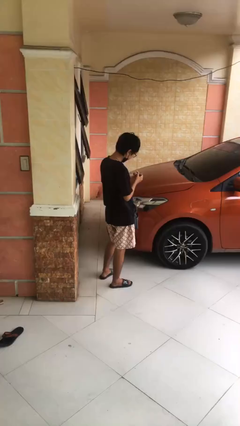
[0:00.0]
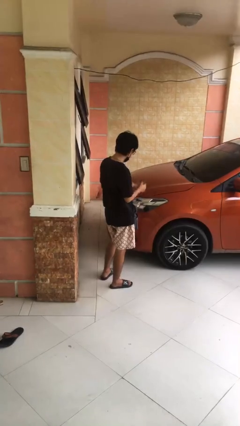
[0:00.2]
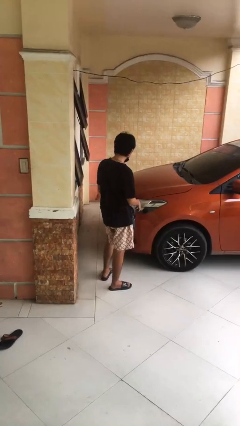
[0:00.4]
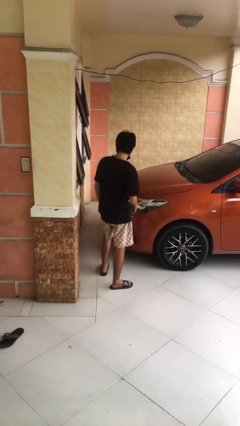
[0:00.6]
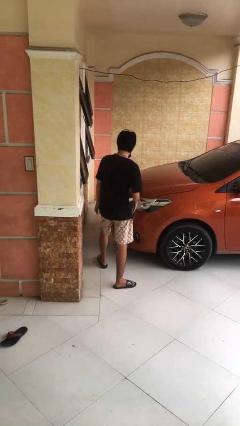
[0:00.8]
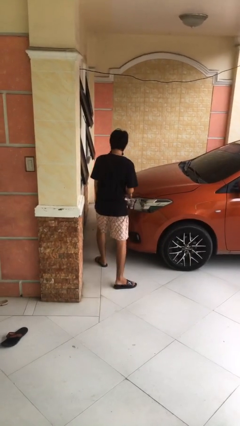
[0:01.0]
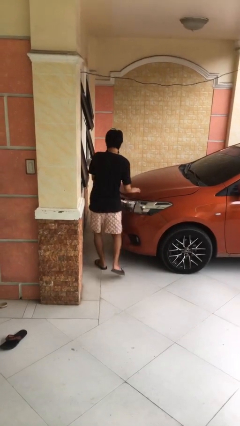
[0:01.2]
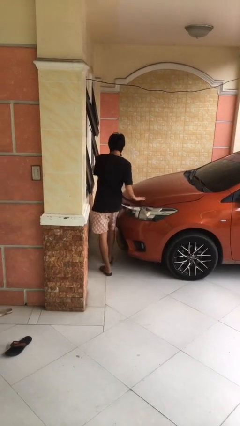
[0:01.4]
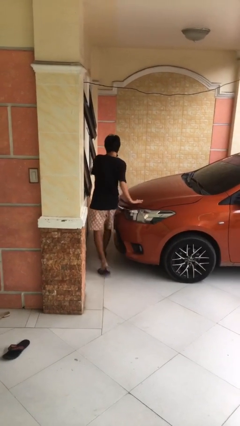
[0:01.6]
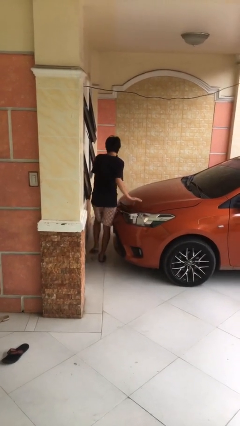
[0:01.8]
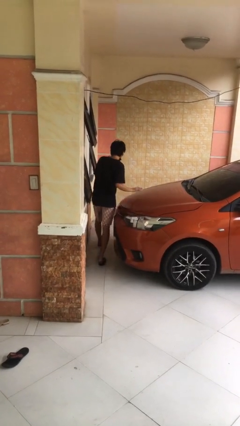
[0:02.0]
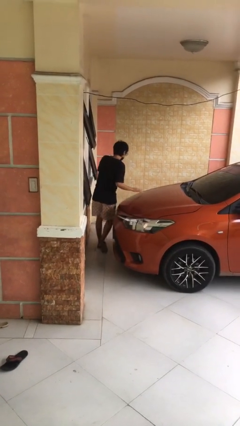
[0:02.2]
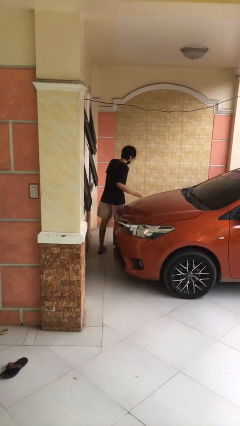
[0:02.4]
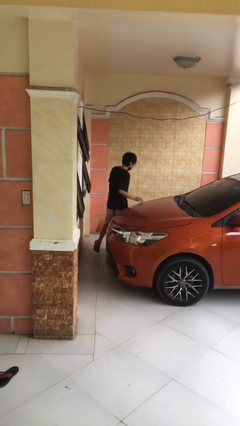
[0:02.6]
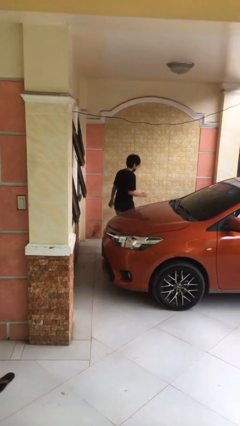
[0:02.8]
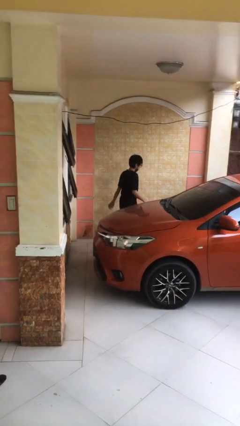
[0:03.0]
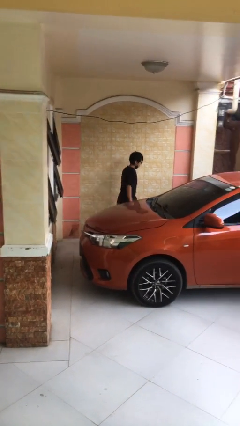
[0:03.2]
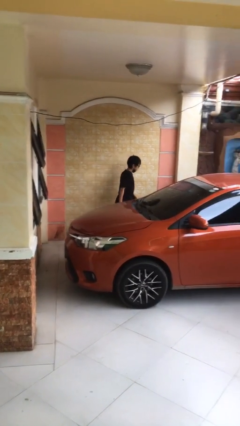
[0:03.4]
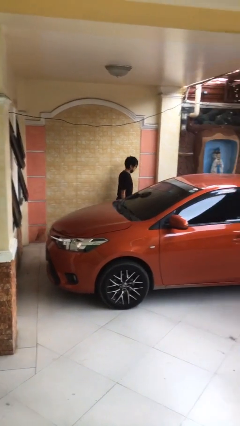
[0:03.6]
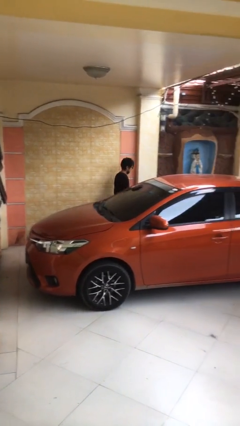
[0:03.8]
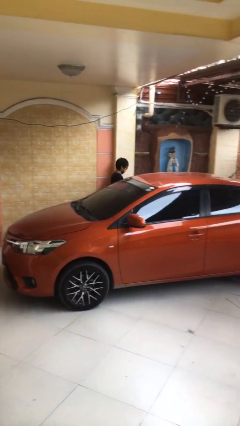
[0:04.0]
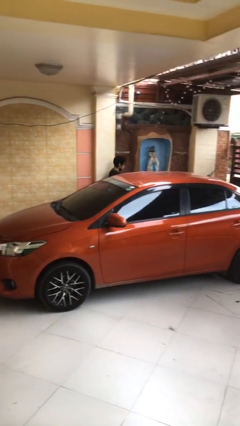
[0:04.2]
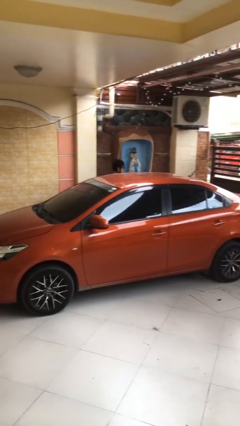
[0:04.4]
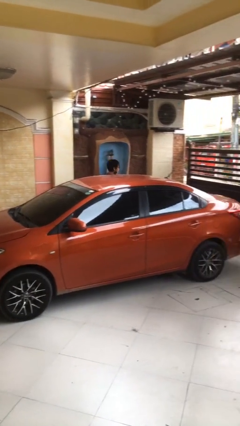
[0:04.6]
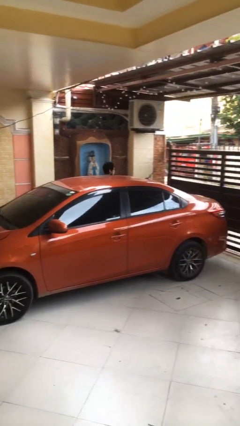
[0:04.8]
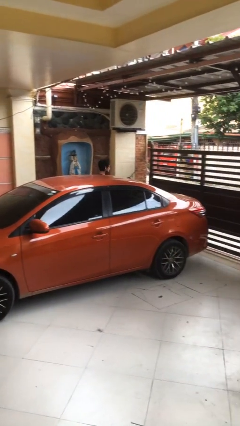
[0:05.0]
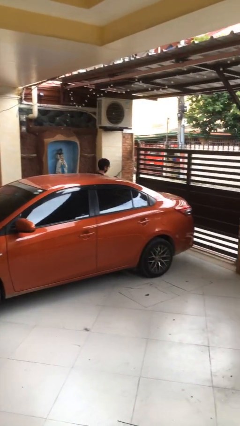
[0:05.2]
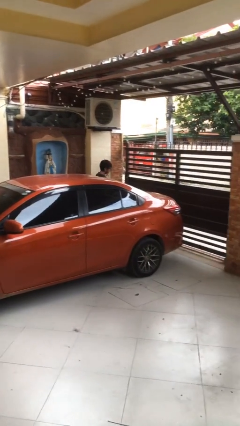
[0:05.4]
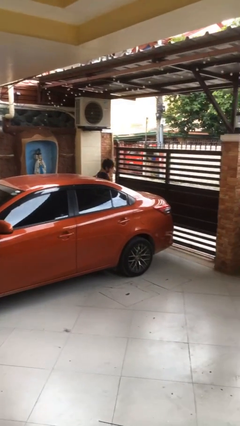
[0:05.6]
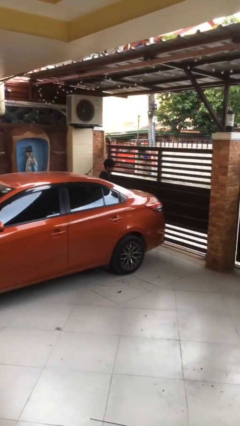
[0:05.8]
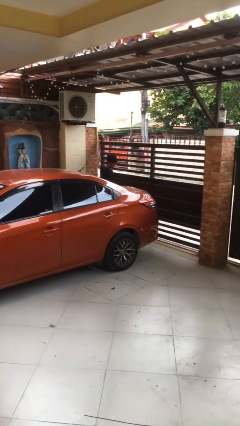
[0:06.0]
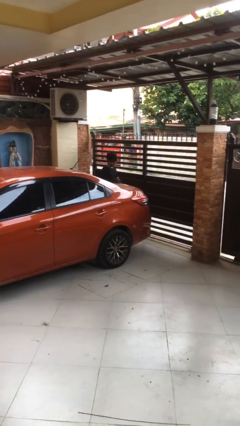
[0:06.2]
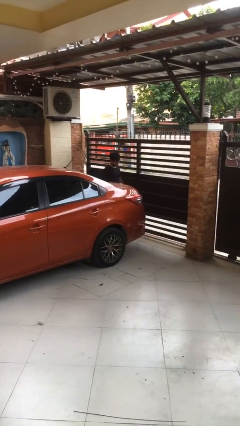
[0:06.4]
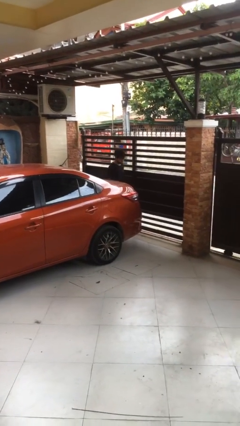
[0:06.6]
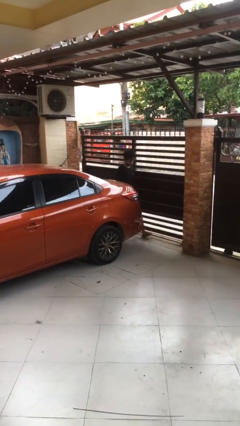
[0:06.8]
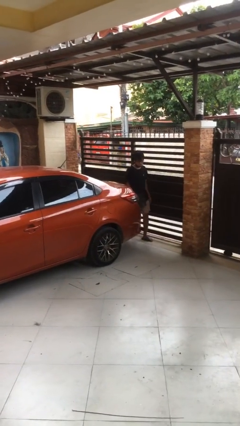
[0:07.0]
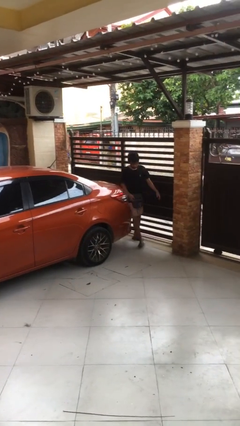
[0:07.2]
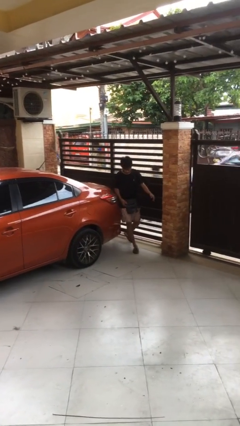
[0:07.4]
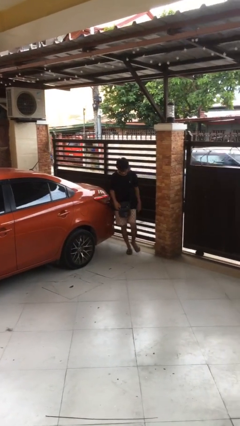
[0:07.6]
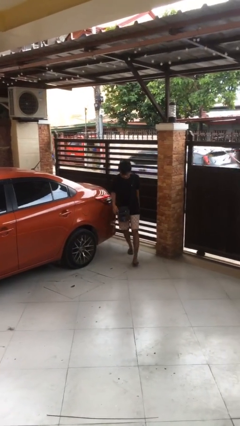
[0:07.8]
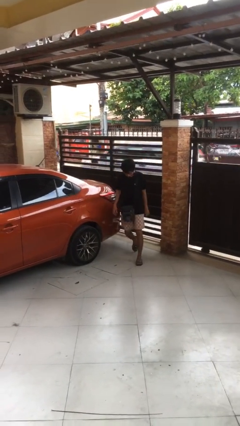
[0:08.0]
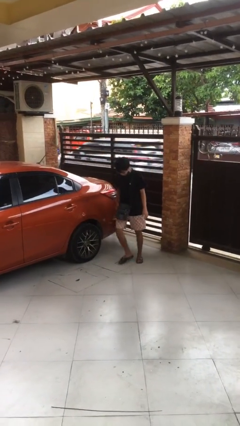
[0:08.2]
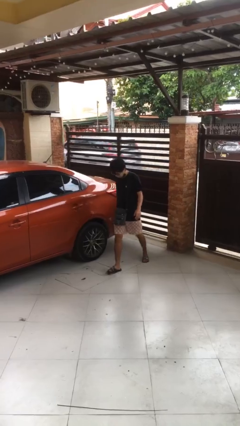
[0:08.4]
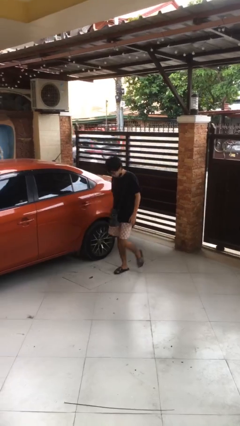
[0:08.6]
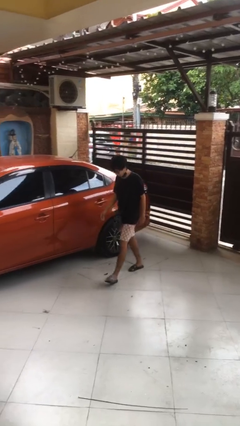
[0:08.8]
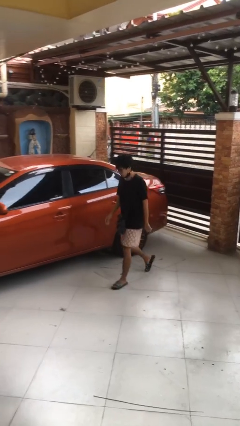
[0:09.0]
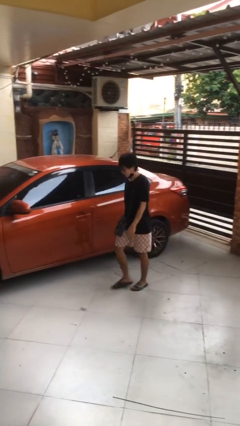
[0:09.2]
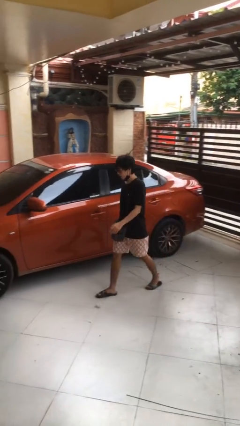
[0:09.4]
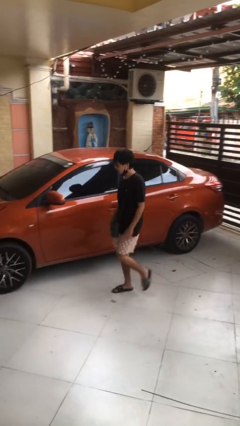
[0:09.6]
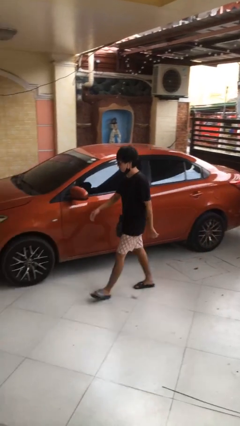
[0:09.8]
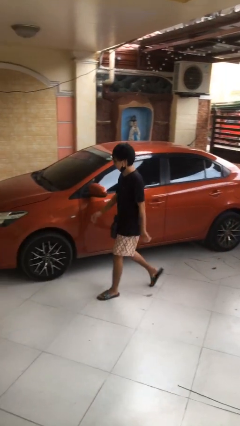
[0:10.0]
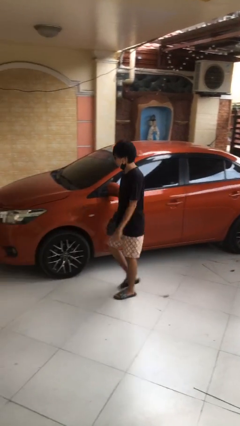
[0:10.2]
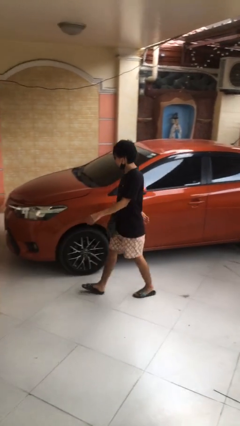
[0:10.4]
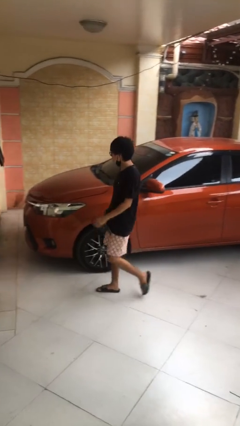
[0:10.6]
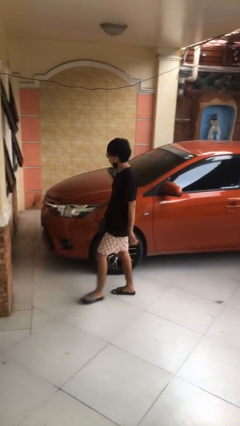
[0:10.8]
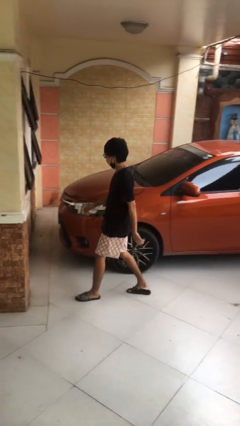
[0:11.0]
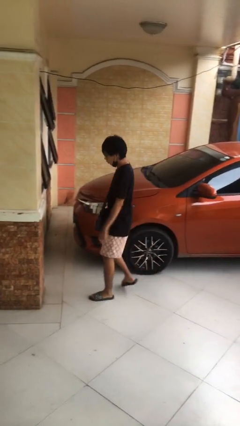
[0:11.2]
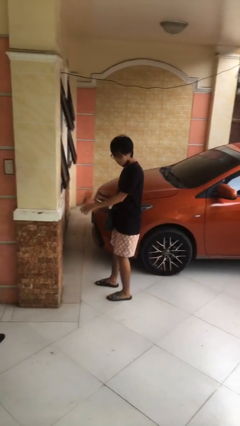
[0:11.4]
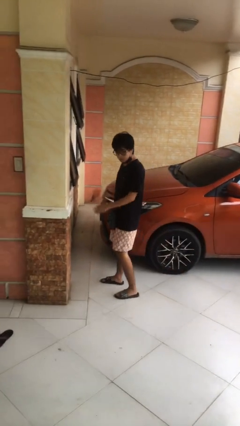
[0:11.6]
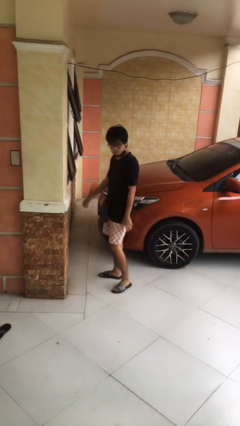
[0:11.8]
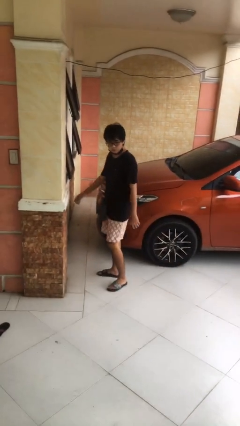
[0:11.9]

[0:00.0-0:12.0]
person walks around car

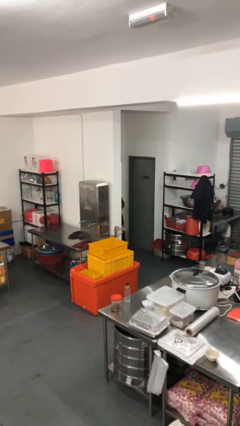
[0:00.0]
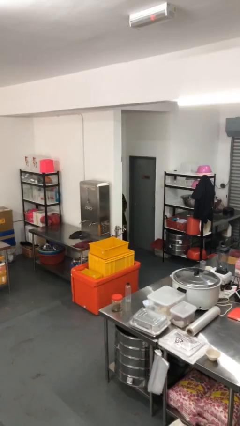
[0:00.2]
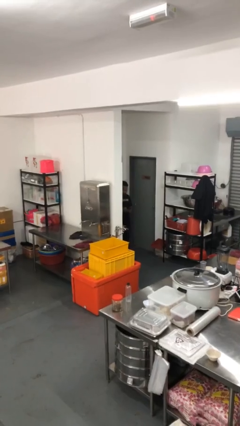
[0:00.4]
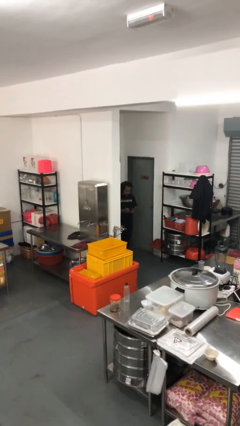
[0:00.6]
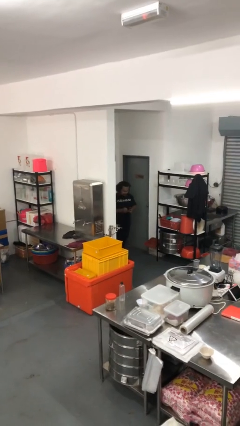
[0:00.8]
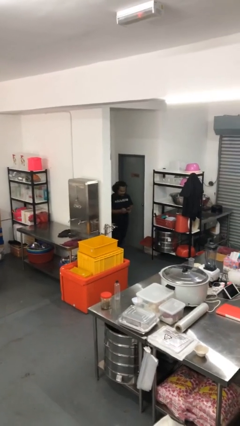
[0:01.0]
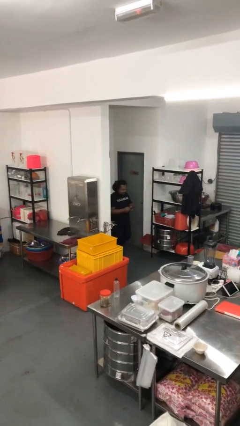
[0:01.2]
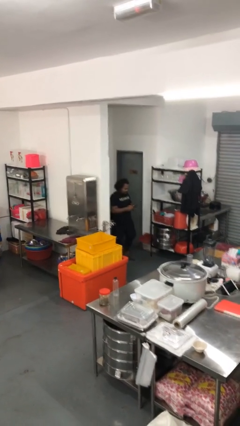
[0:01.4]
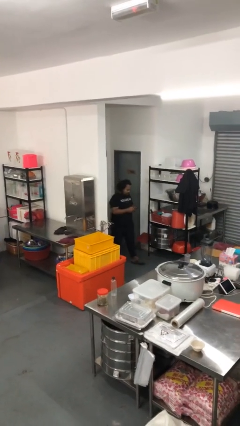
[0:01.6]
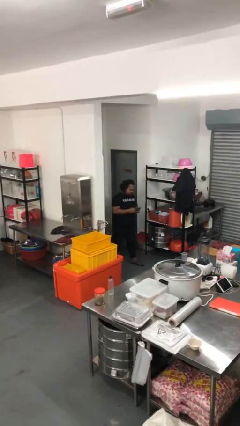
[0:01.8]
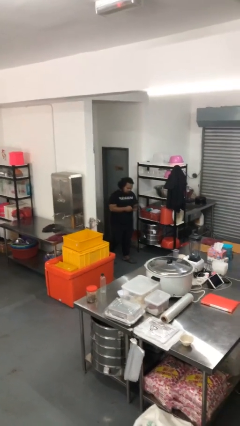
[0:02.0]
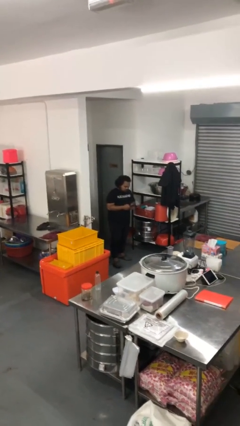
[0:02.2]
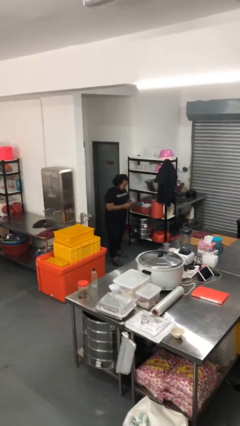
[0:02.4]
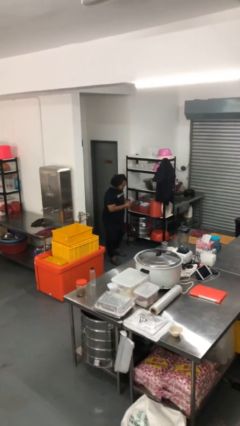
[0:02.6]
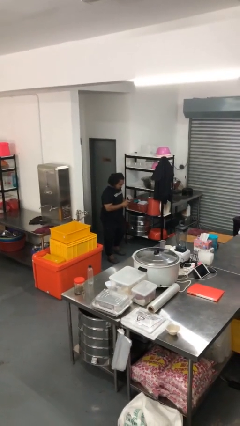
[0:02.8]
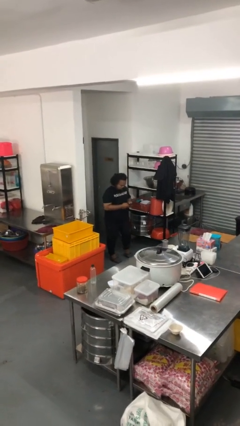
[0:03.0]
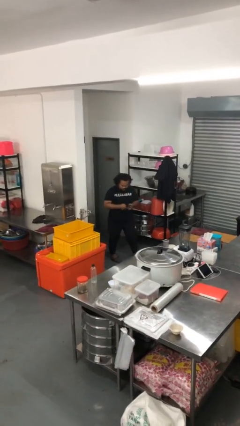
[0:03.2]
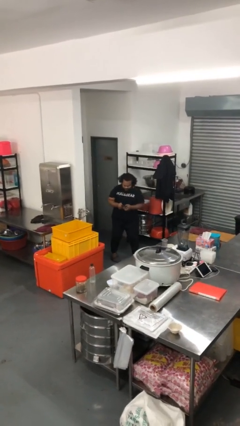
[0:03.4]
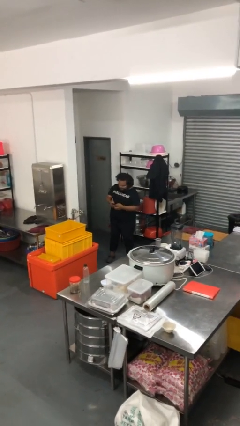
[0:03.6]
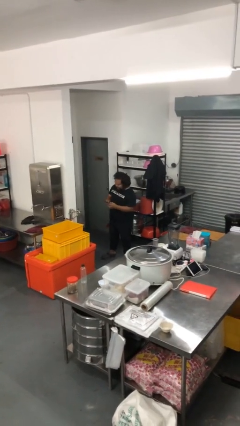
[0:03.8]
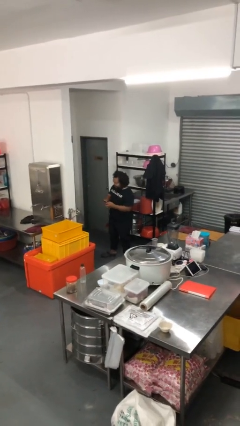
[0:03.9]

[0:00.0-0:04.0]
person enters scene through structure

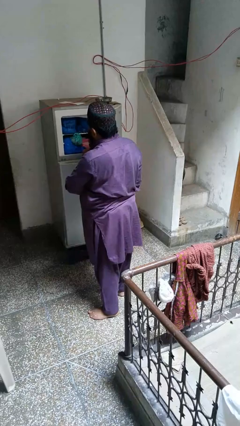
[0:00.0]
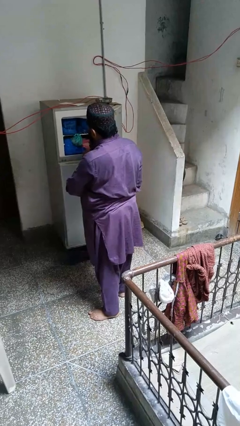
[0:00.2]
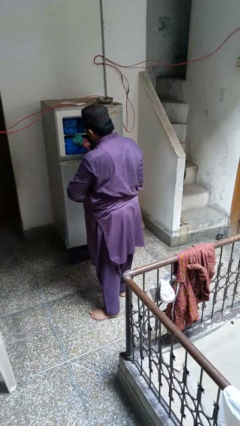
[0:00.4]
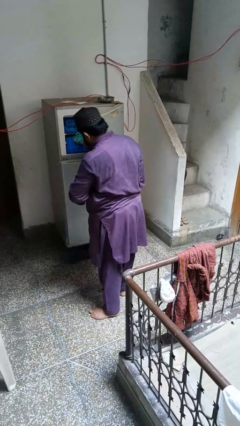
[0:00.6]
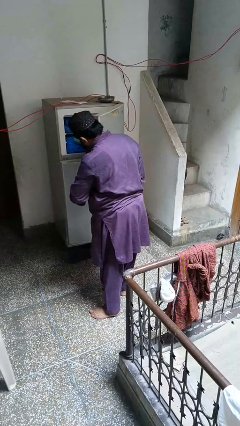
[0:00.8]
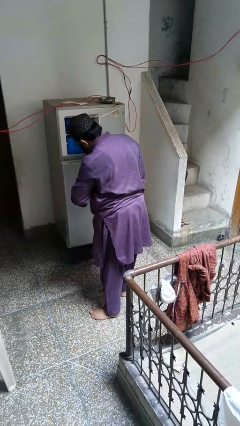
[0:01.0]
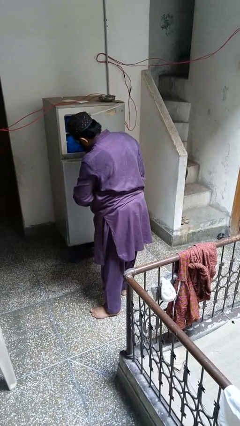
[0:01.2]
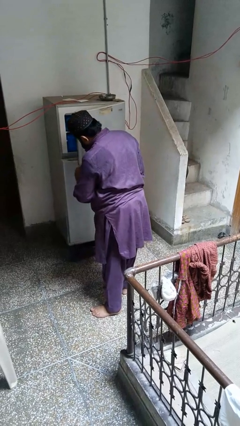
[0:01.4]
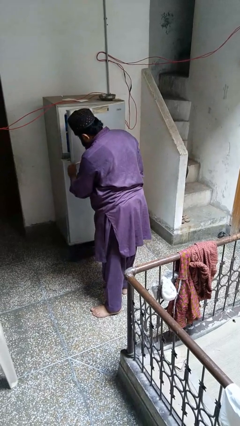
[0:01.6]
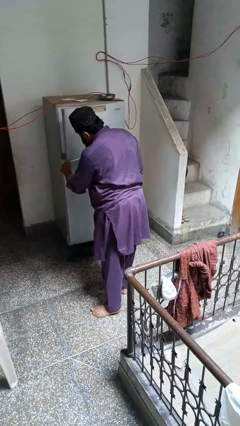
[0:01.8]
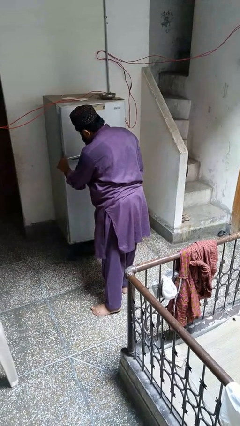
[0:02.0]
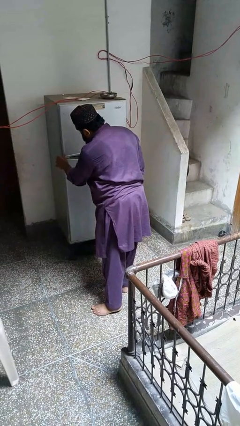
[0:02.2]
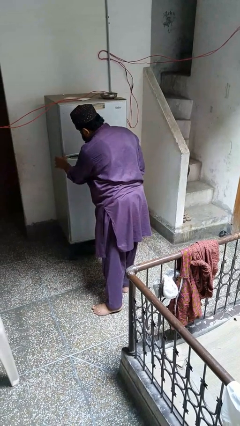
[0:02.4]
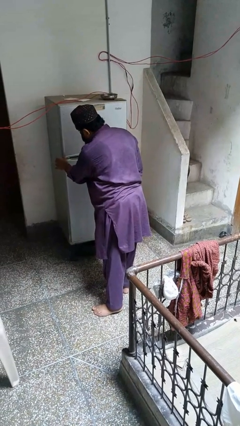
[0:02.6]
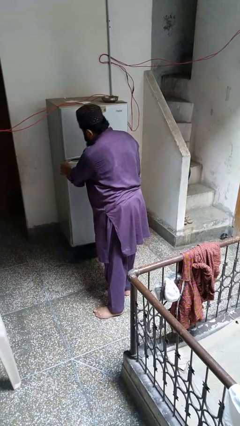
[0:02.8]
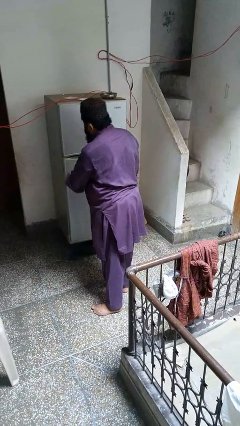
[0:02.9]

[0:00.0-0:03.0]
person closes refrigerator
